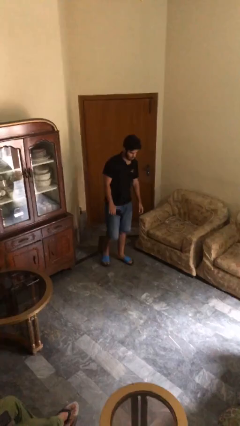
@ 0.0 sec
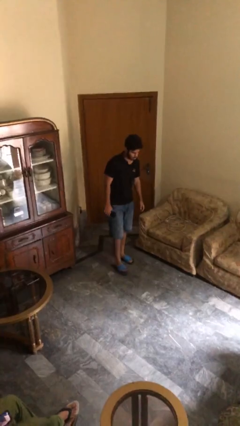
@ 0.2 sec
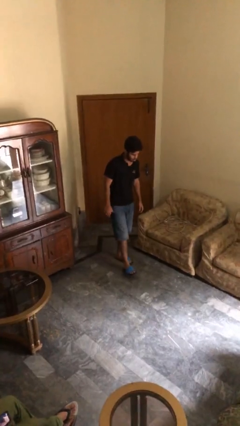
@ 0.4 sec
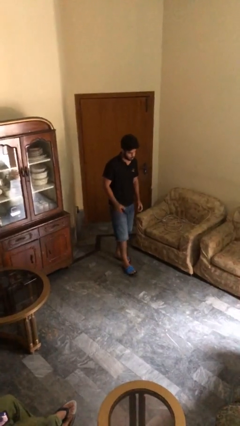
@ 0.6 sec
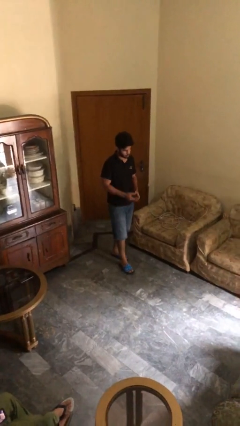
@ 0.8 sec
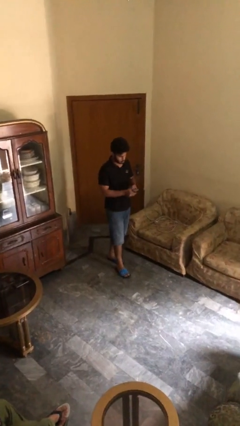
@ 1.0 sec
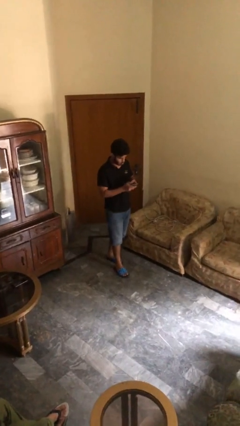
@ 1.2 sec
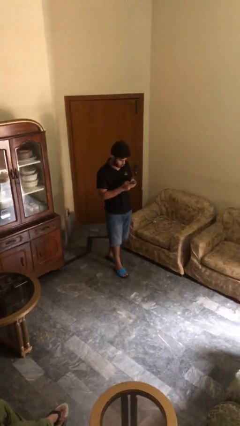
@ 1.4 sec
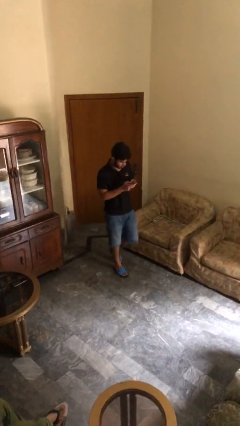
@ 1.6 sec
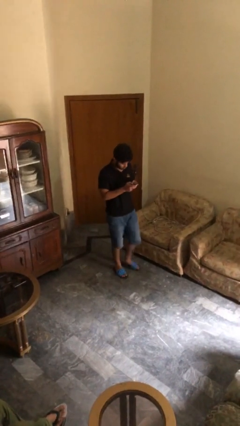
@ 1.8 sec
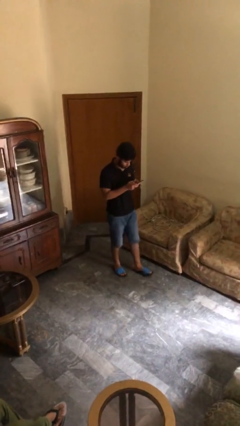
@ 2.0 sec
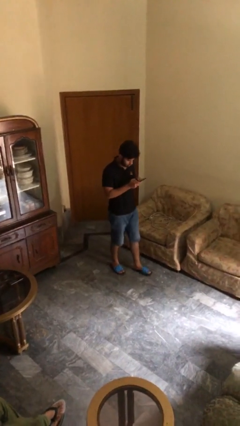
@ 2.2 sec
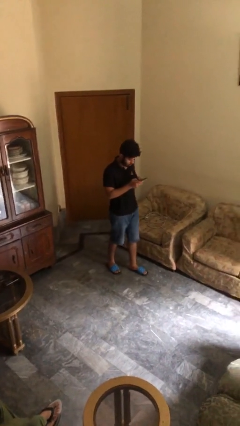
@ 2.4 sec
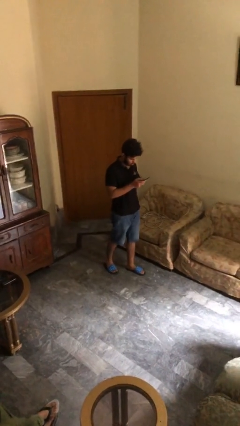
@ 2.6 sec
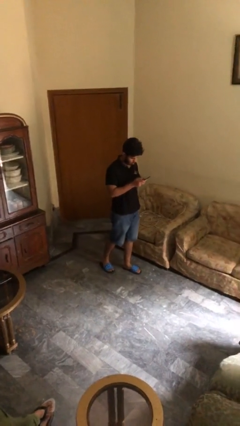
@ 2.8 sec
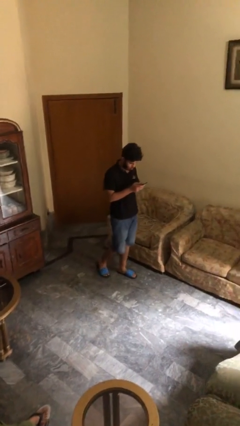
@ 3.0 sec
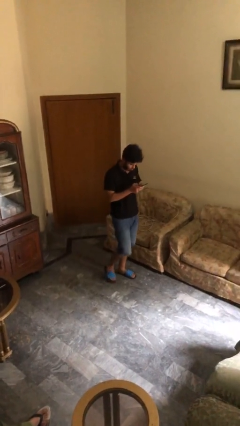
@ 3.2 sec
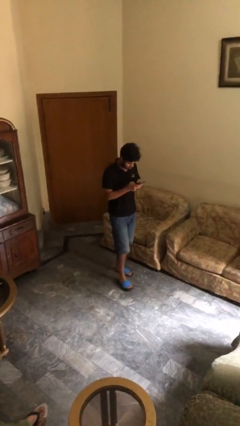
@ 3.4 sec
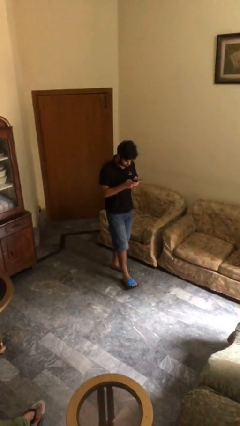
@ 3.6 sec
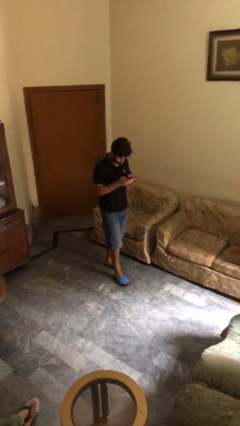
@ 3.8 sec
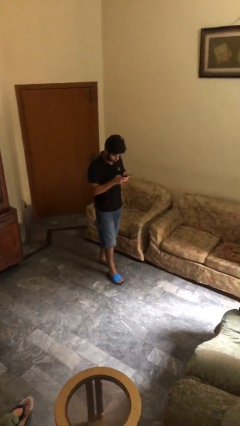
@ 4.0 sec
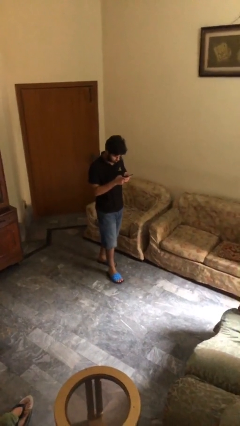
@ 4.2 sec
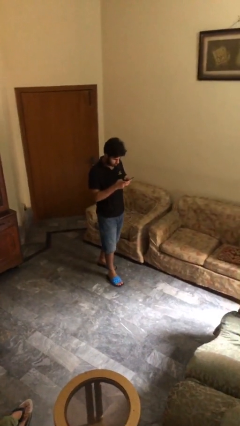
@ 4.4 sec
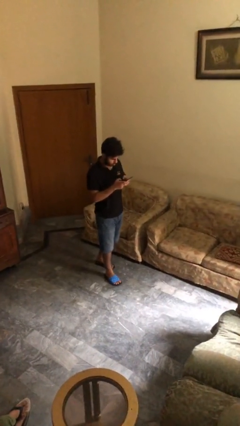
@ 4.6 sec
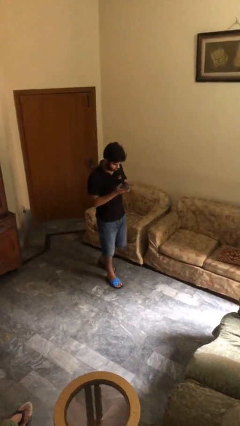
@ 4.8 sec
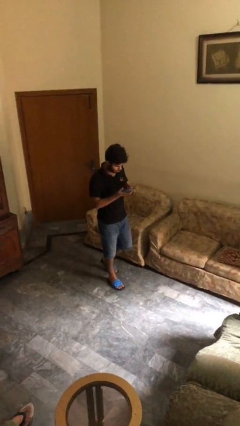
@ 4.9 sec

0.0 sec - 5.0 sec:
person texts on phone

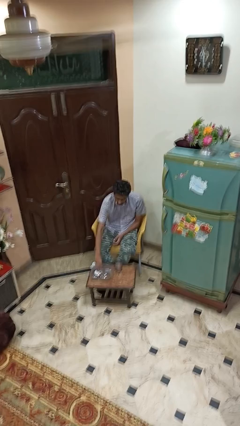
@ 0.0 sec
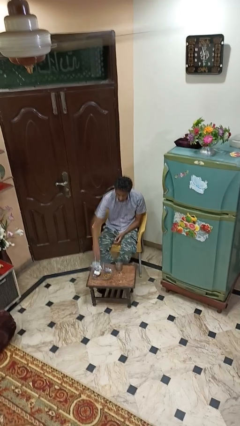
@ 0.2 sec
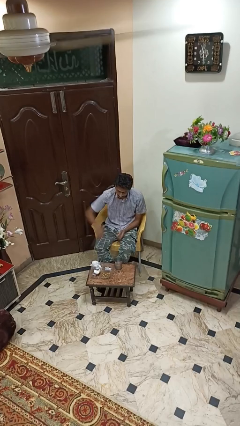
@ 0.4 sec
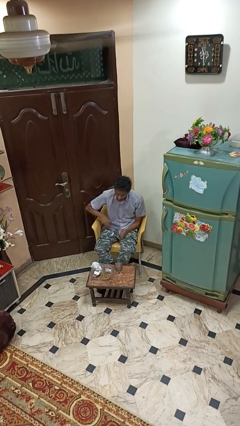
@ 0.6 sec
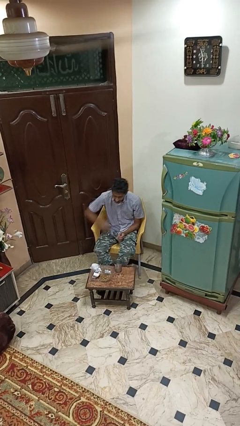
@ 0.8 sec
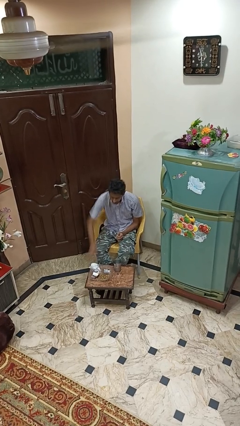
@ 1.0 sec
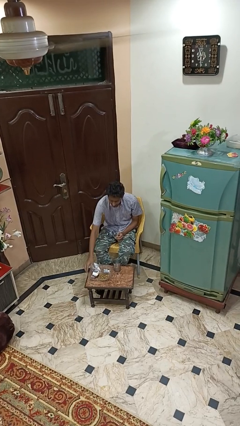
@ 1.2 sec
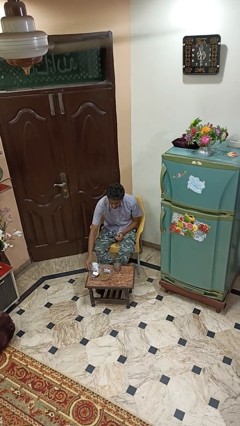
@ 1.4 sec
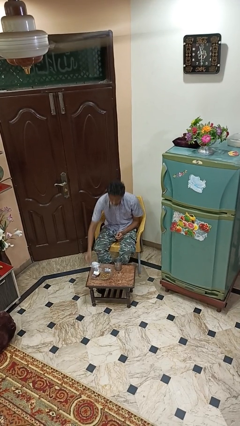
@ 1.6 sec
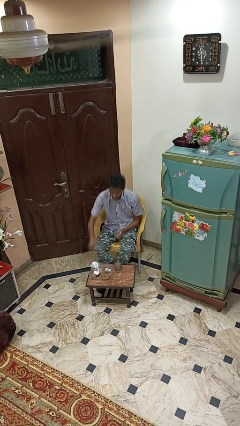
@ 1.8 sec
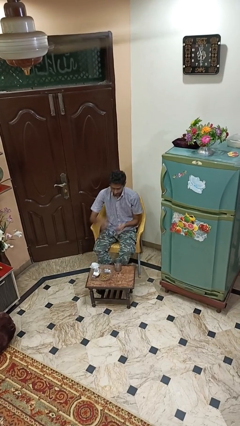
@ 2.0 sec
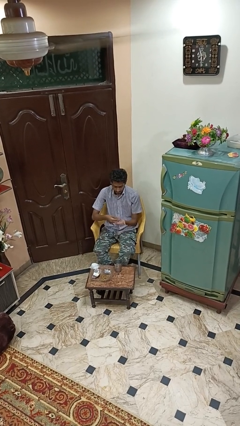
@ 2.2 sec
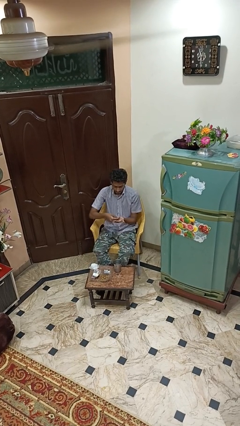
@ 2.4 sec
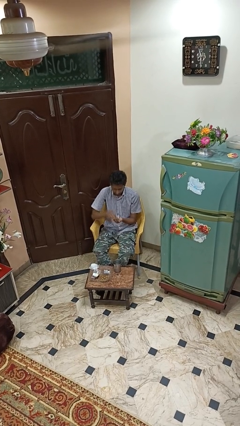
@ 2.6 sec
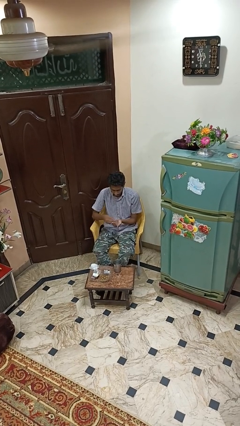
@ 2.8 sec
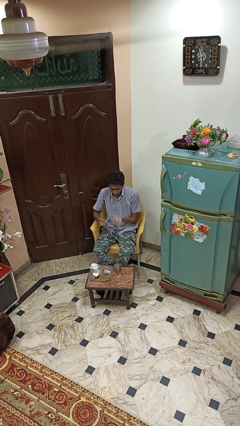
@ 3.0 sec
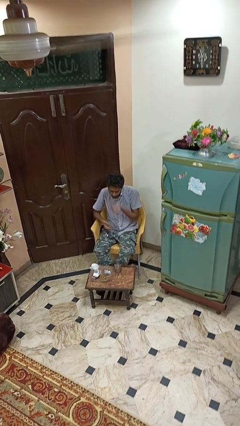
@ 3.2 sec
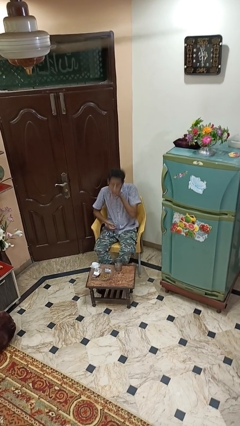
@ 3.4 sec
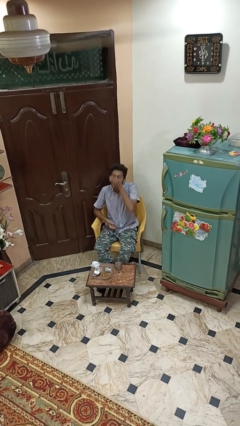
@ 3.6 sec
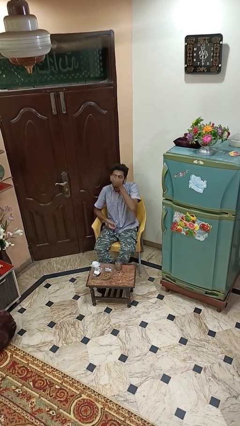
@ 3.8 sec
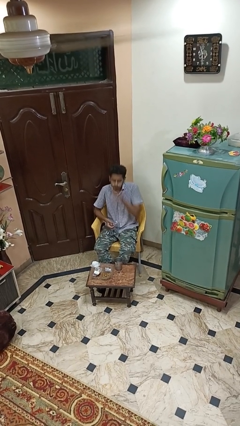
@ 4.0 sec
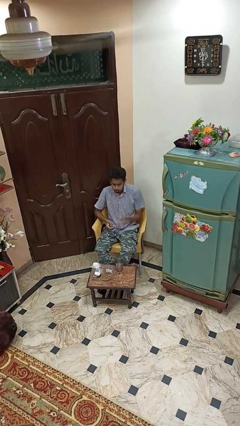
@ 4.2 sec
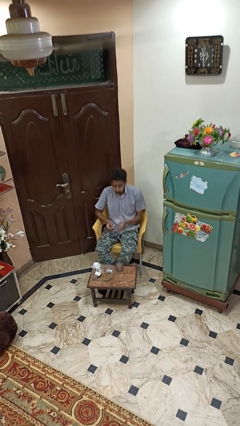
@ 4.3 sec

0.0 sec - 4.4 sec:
person takes medicine pills

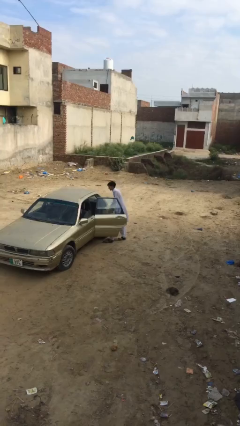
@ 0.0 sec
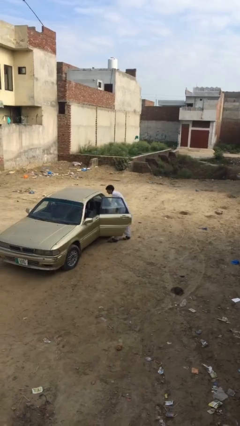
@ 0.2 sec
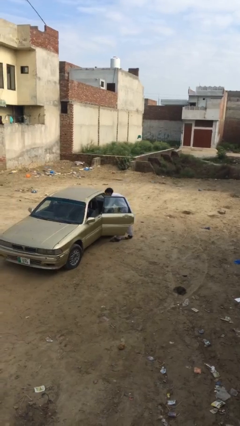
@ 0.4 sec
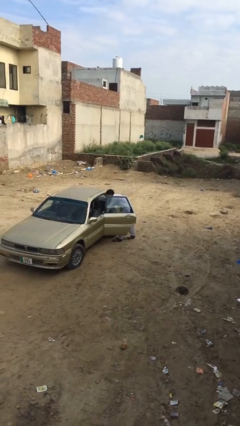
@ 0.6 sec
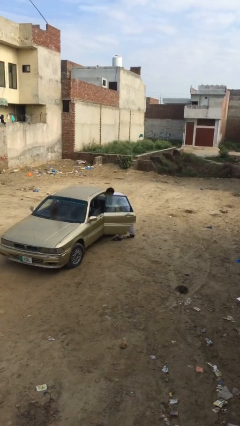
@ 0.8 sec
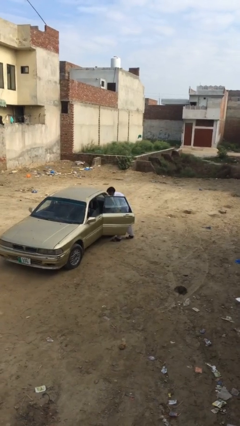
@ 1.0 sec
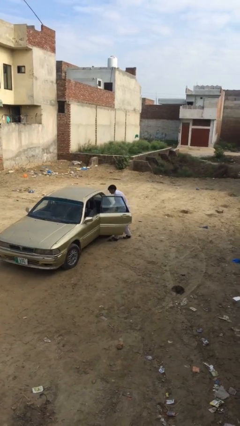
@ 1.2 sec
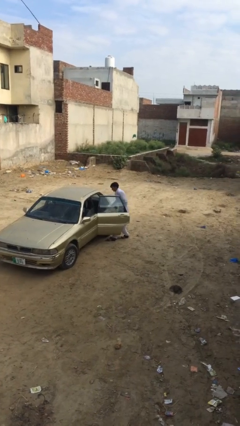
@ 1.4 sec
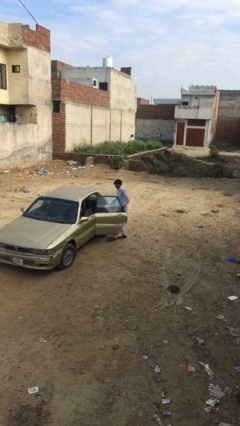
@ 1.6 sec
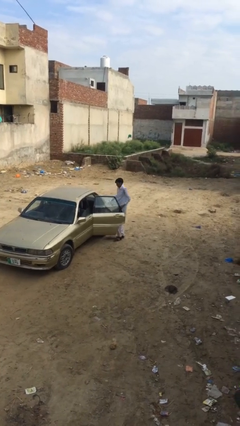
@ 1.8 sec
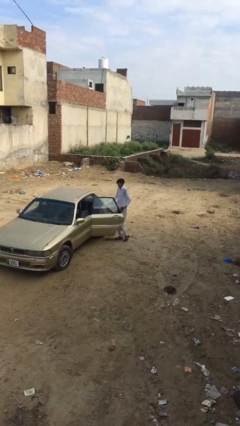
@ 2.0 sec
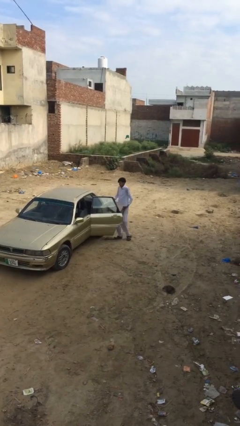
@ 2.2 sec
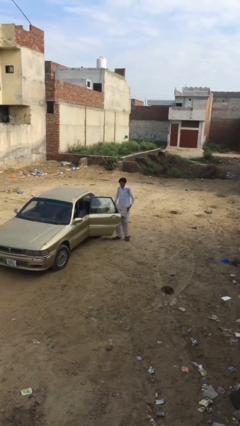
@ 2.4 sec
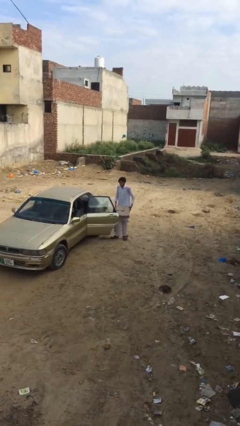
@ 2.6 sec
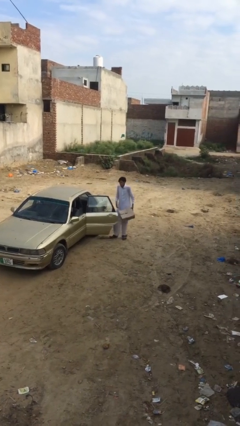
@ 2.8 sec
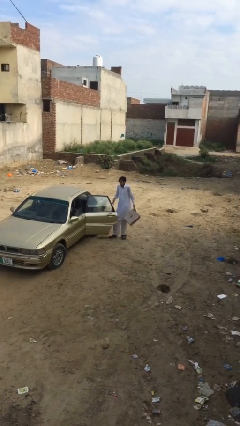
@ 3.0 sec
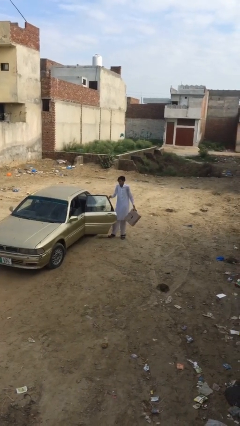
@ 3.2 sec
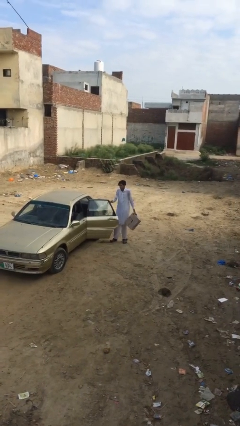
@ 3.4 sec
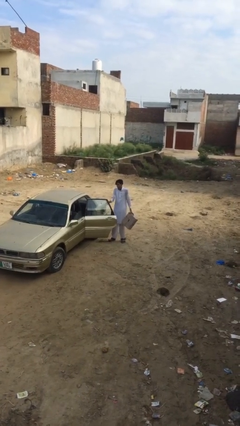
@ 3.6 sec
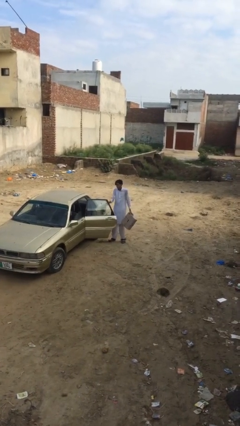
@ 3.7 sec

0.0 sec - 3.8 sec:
person unloads car

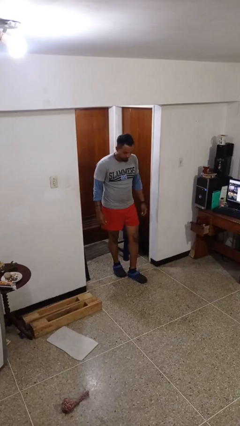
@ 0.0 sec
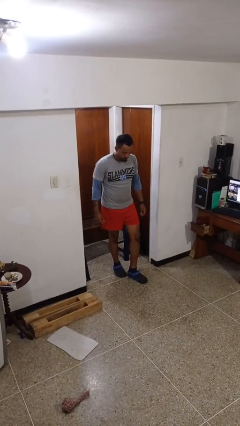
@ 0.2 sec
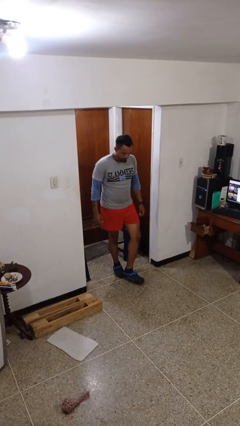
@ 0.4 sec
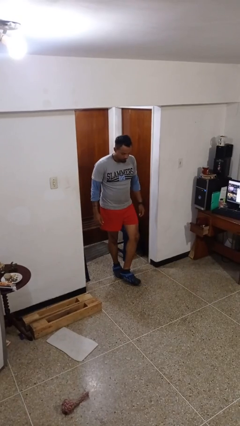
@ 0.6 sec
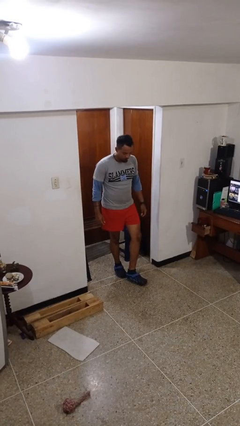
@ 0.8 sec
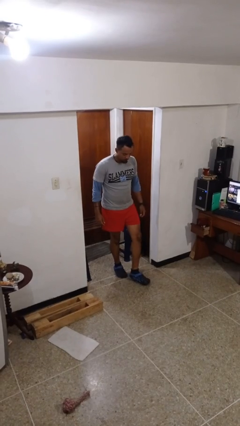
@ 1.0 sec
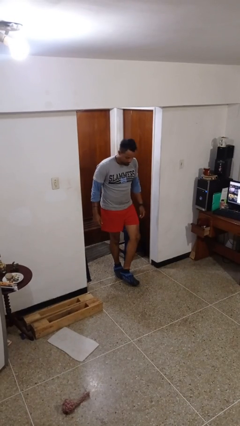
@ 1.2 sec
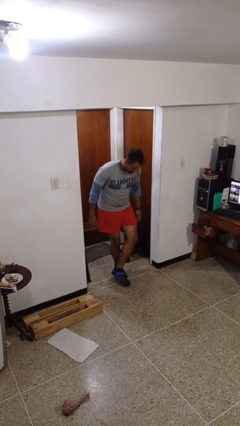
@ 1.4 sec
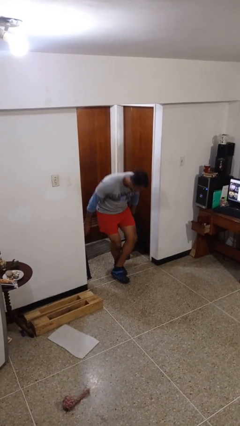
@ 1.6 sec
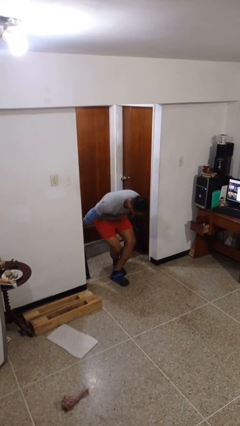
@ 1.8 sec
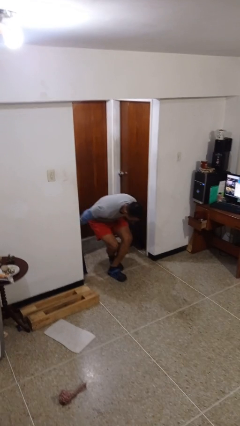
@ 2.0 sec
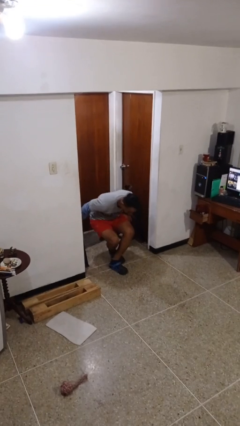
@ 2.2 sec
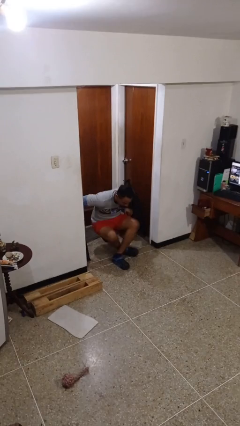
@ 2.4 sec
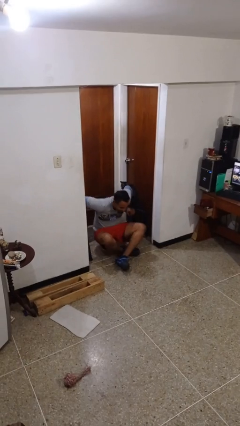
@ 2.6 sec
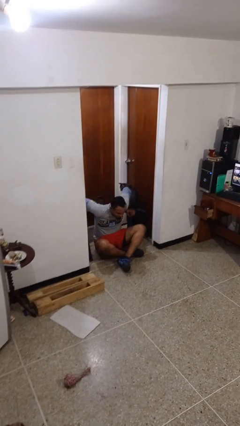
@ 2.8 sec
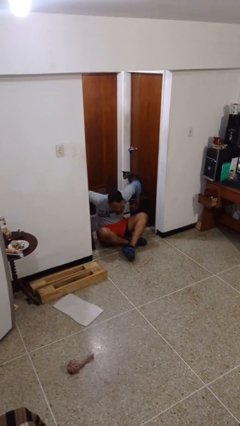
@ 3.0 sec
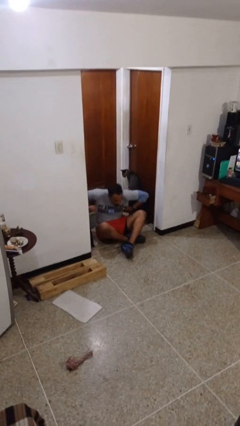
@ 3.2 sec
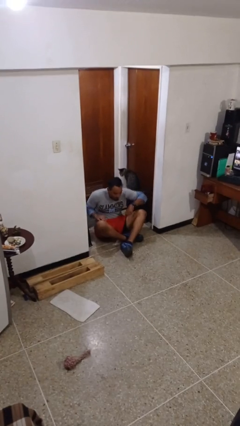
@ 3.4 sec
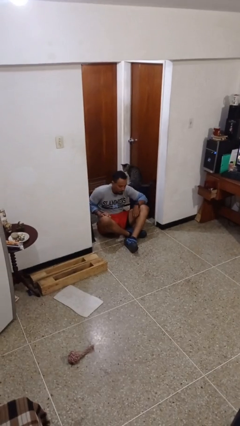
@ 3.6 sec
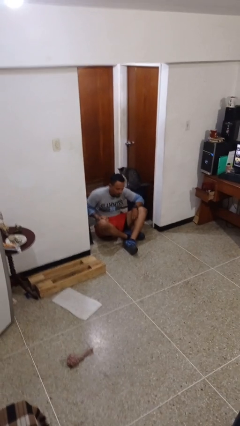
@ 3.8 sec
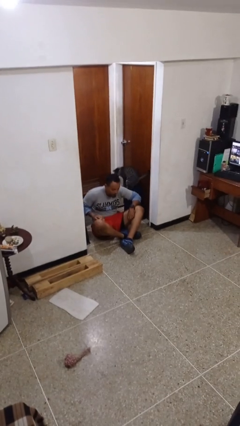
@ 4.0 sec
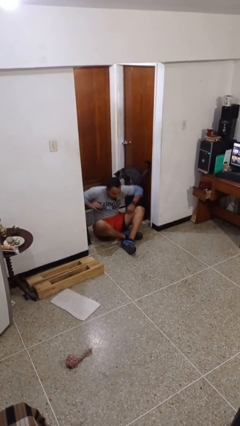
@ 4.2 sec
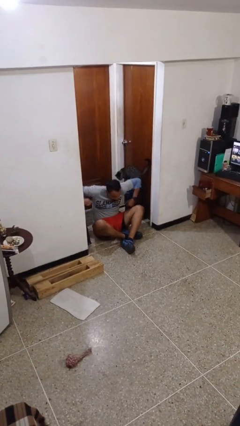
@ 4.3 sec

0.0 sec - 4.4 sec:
person sits crisscross
